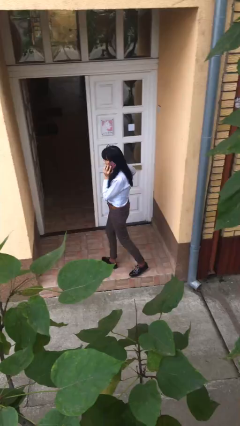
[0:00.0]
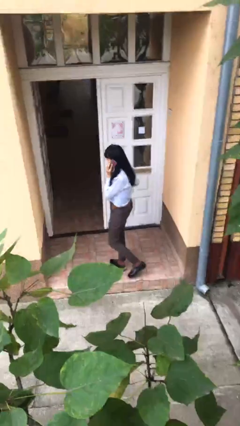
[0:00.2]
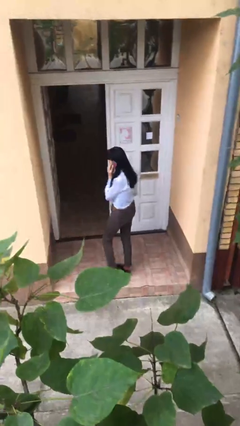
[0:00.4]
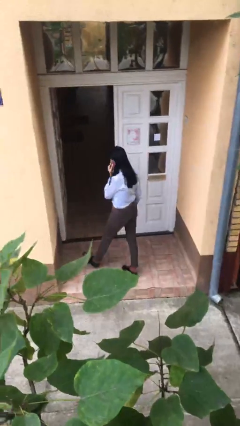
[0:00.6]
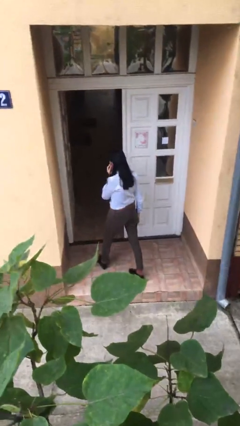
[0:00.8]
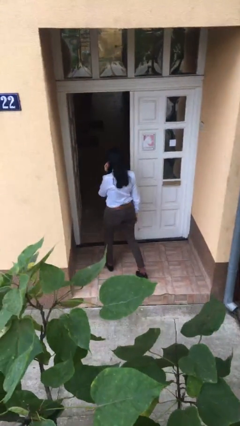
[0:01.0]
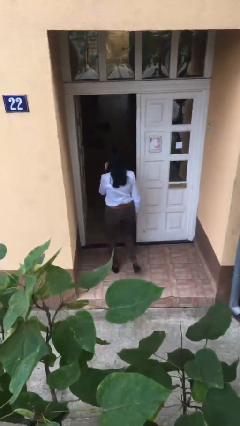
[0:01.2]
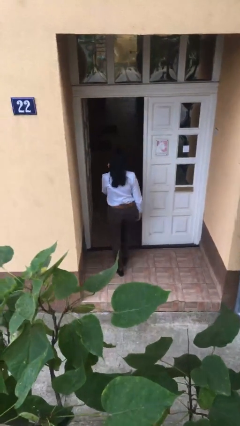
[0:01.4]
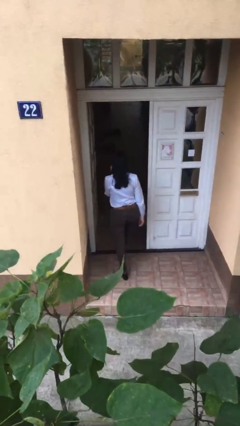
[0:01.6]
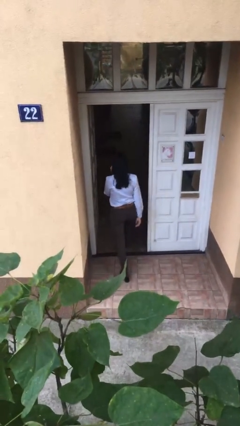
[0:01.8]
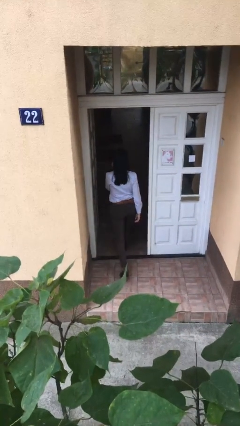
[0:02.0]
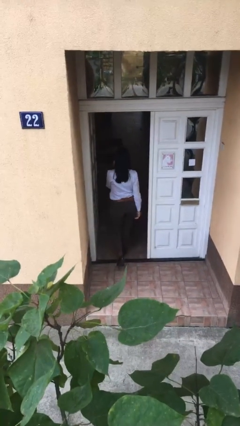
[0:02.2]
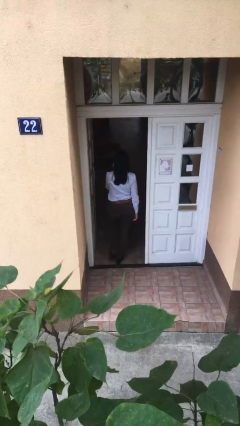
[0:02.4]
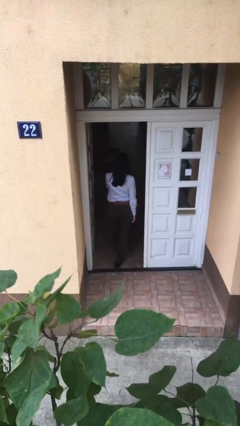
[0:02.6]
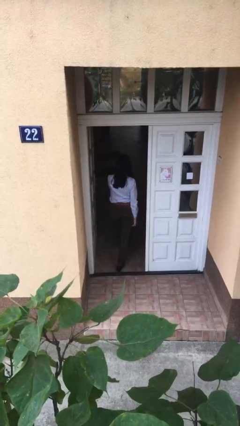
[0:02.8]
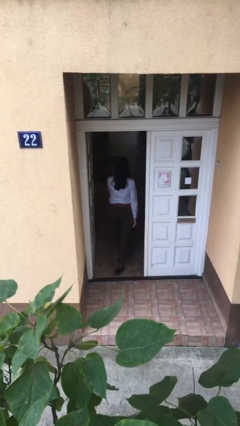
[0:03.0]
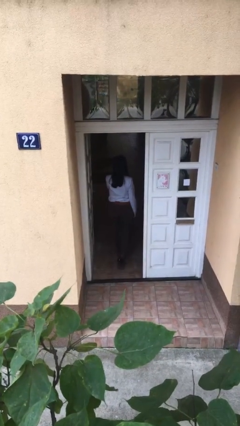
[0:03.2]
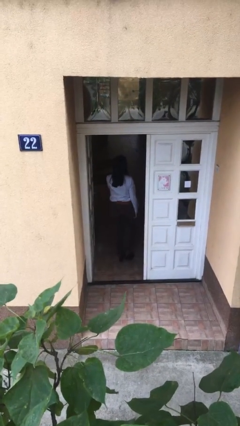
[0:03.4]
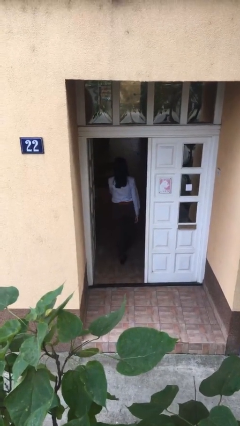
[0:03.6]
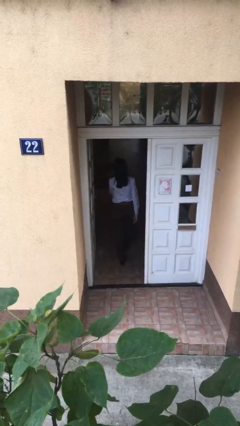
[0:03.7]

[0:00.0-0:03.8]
person exits scene through structure

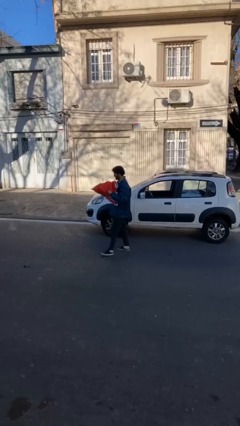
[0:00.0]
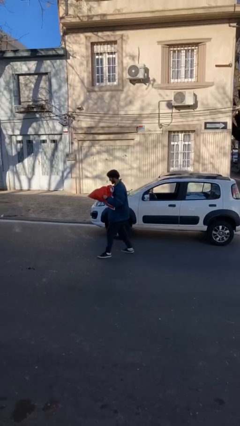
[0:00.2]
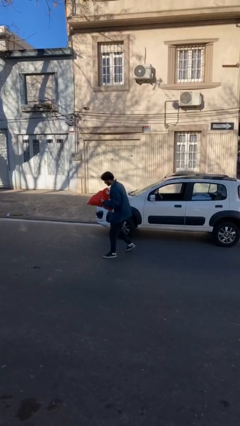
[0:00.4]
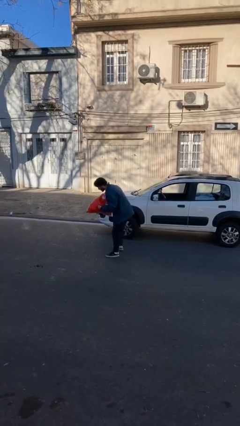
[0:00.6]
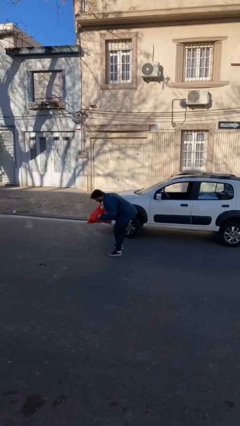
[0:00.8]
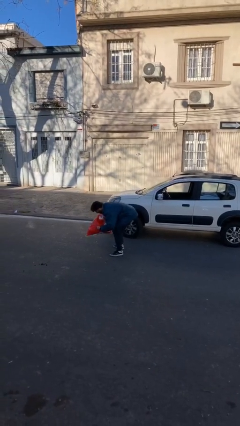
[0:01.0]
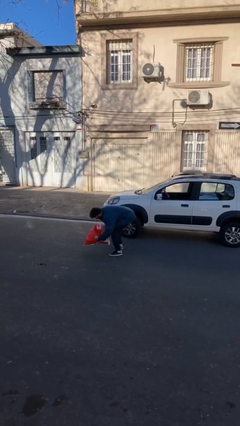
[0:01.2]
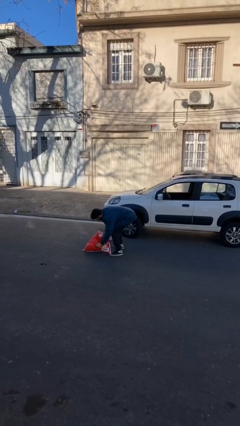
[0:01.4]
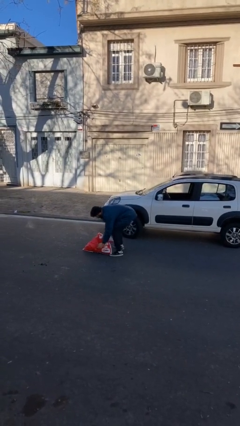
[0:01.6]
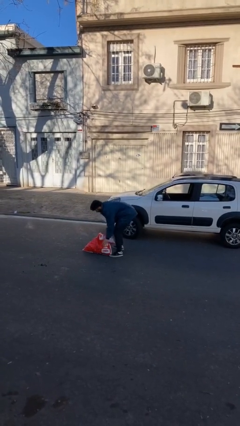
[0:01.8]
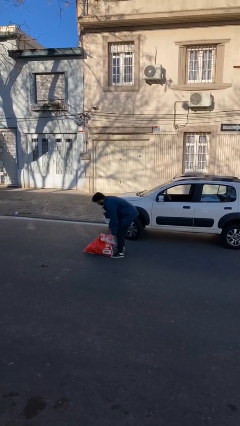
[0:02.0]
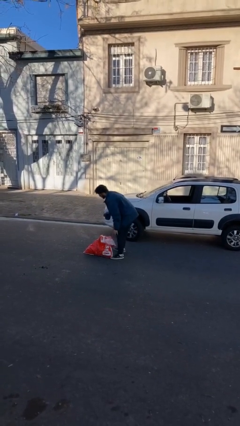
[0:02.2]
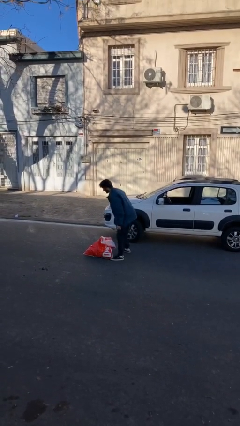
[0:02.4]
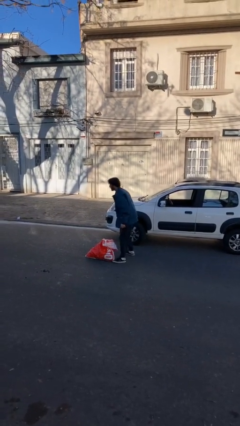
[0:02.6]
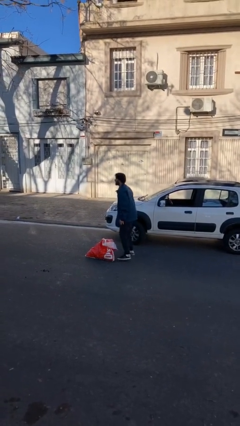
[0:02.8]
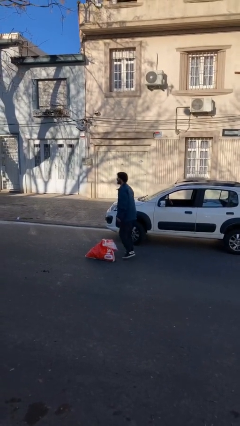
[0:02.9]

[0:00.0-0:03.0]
person puts down object on floor

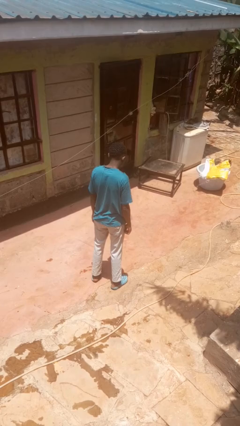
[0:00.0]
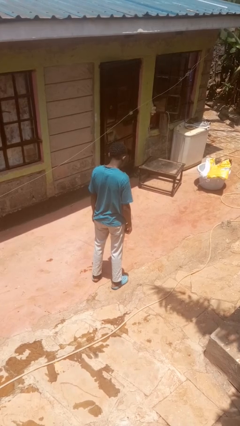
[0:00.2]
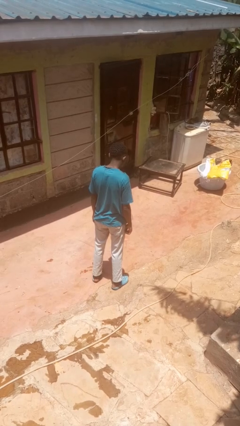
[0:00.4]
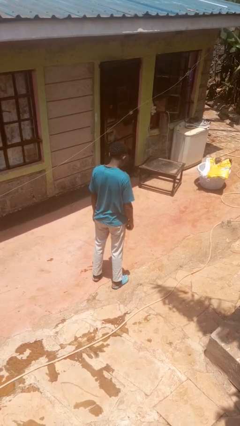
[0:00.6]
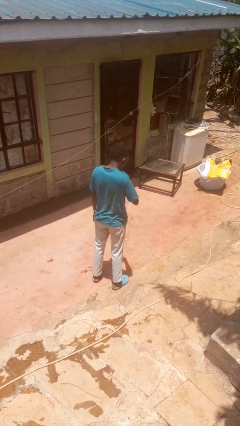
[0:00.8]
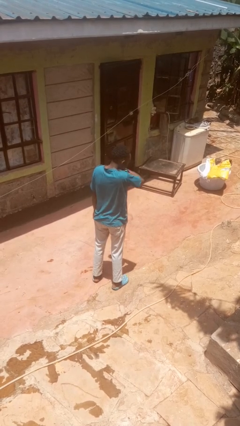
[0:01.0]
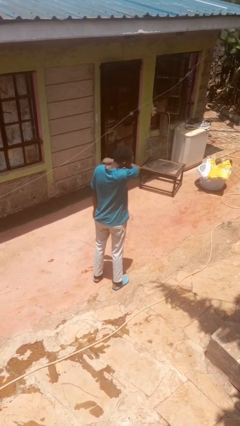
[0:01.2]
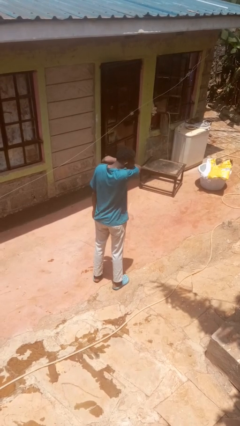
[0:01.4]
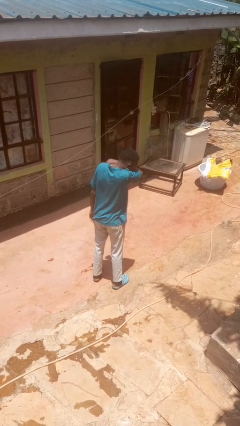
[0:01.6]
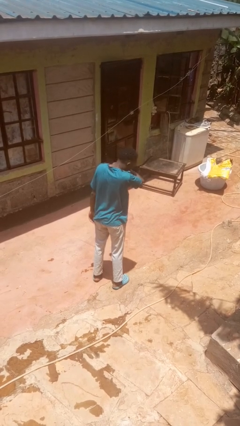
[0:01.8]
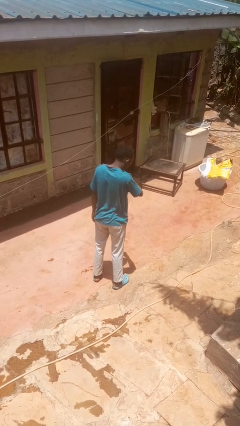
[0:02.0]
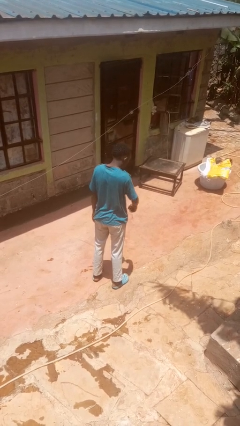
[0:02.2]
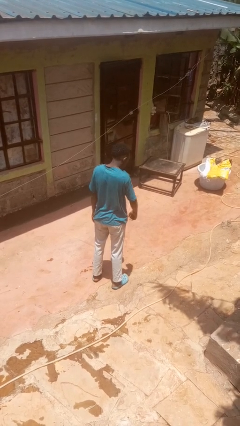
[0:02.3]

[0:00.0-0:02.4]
person sneezes into arm

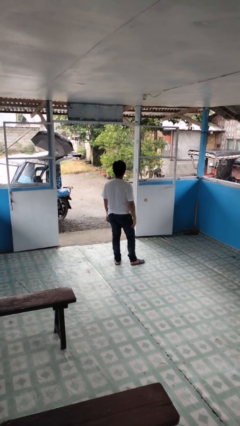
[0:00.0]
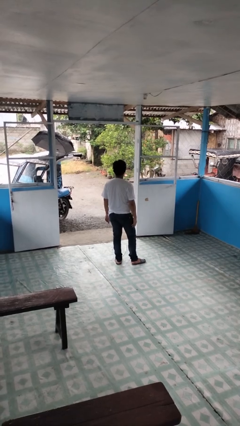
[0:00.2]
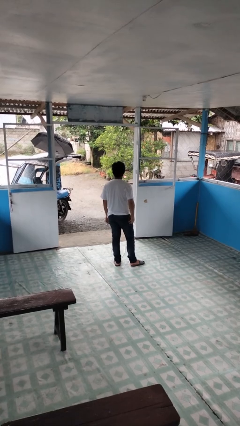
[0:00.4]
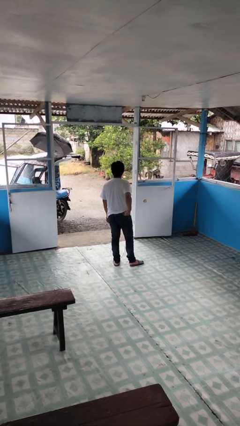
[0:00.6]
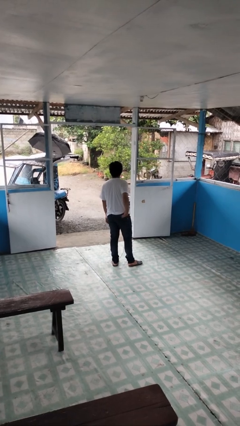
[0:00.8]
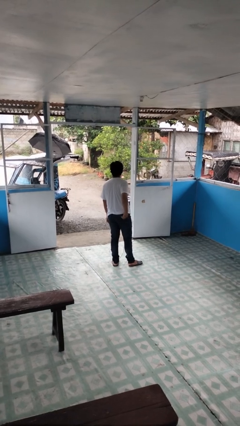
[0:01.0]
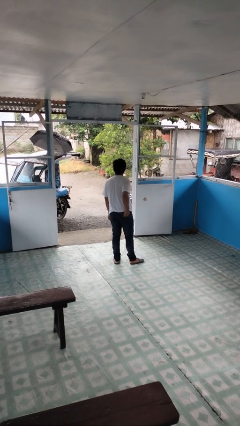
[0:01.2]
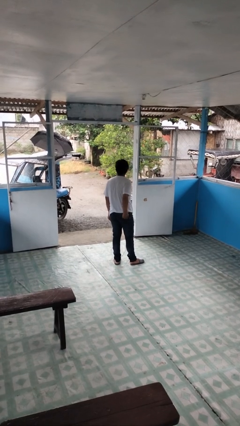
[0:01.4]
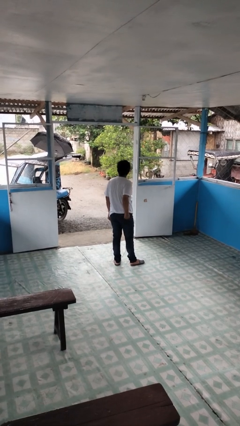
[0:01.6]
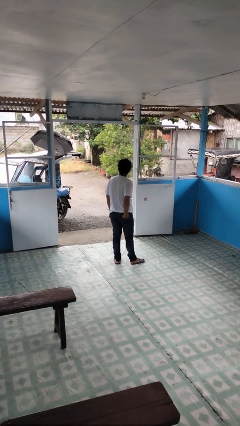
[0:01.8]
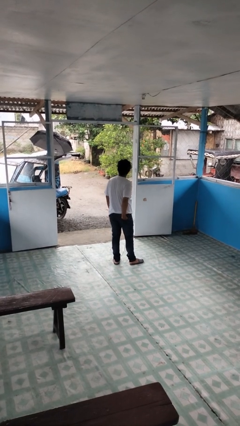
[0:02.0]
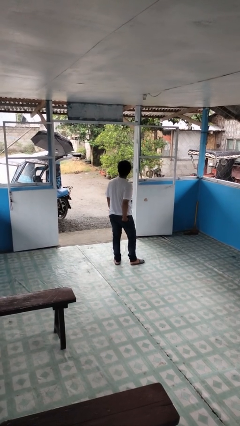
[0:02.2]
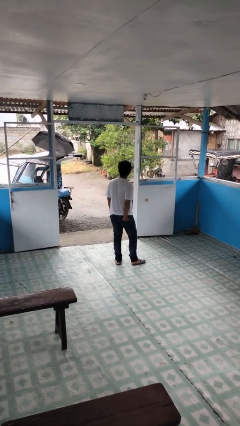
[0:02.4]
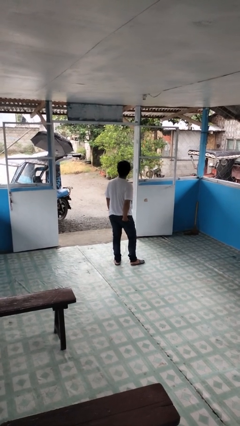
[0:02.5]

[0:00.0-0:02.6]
person puts hands in back pockets

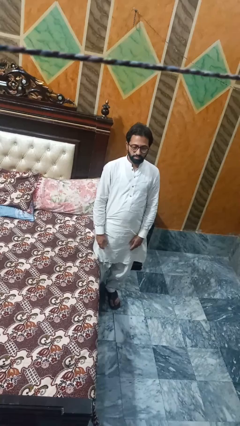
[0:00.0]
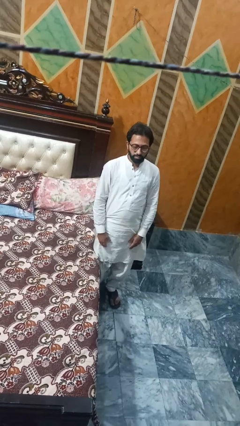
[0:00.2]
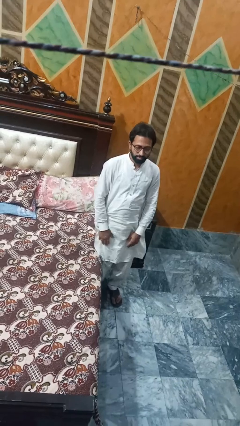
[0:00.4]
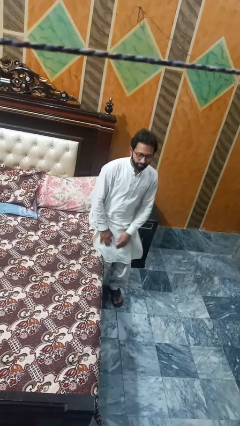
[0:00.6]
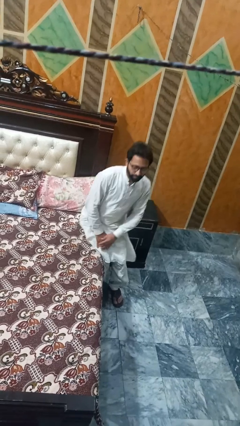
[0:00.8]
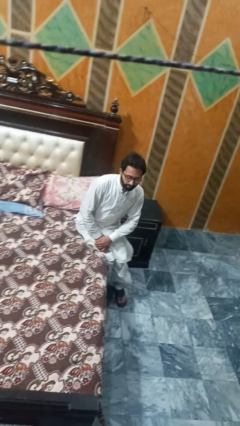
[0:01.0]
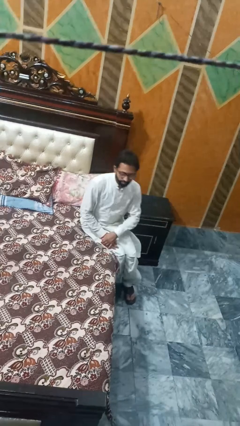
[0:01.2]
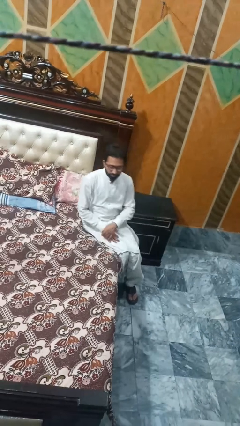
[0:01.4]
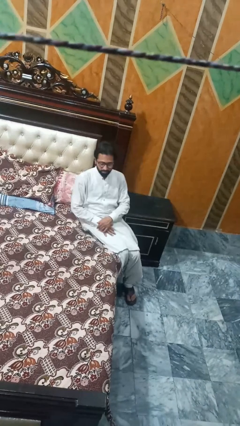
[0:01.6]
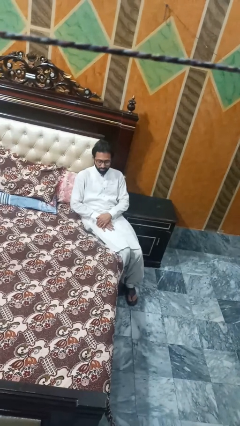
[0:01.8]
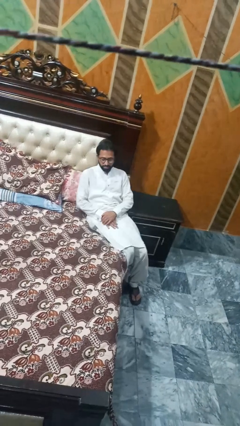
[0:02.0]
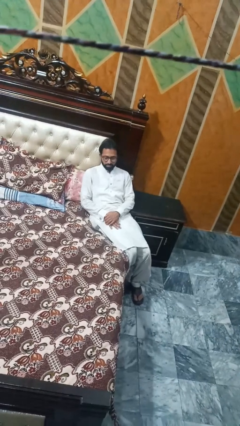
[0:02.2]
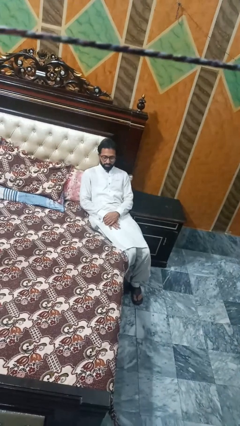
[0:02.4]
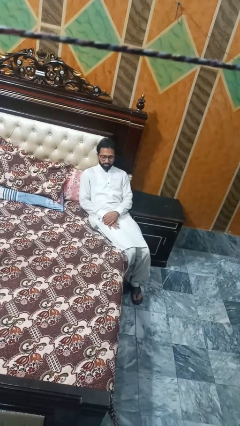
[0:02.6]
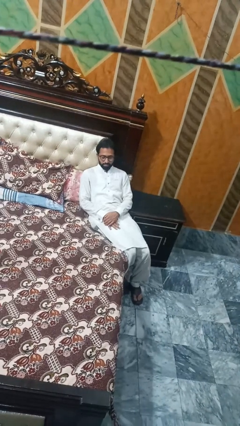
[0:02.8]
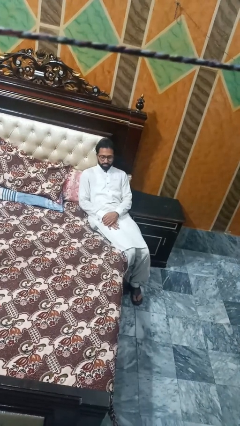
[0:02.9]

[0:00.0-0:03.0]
person lies down on bed

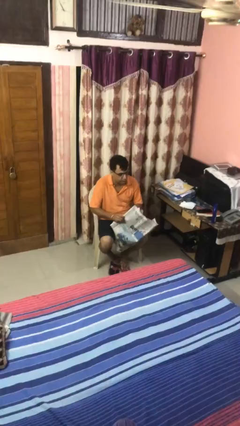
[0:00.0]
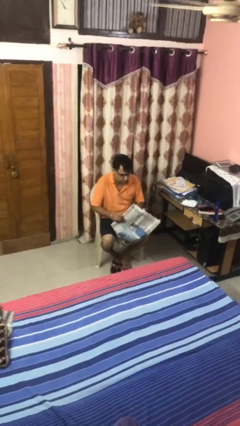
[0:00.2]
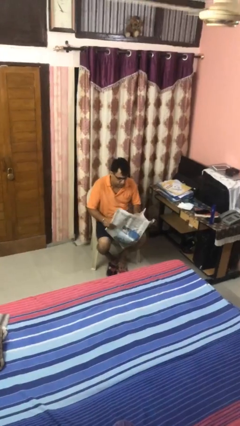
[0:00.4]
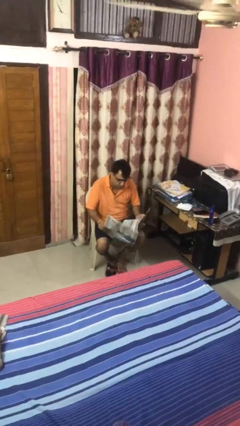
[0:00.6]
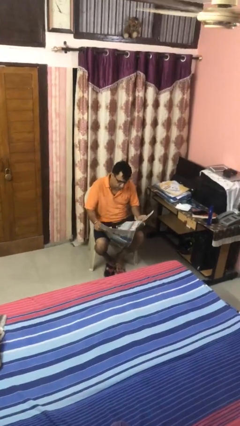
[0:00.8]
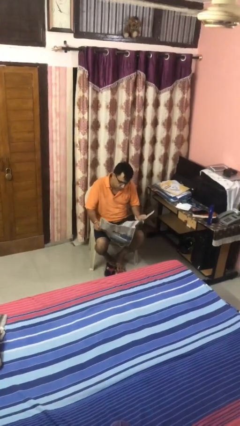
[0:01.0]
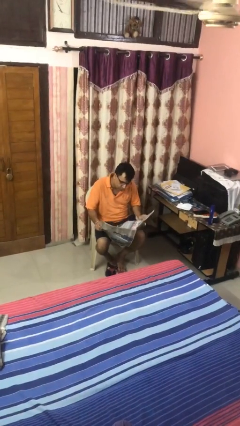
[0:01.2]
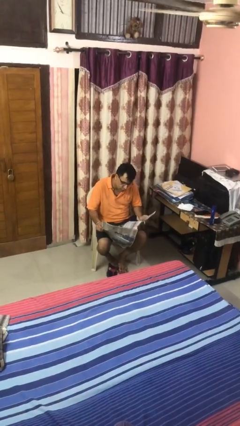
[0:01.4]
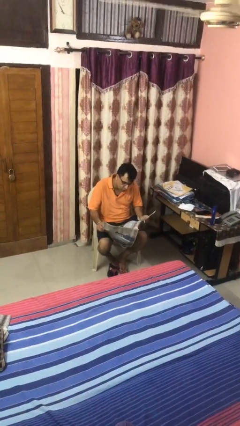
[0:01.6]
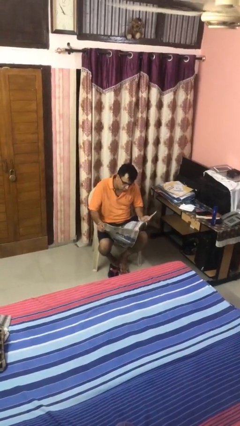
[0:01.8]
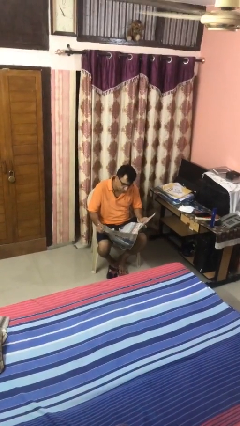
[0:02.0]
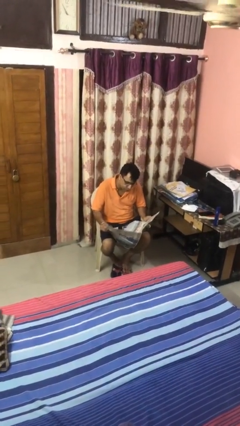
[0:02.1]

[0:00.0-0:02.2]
person reads newspaper

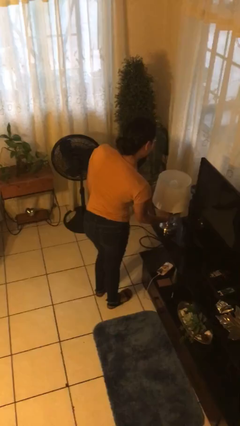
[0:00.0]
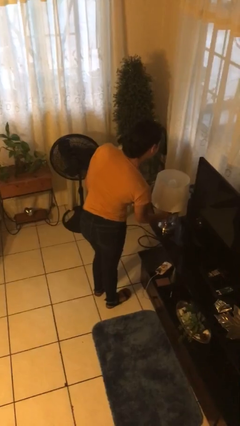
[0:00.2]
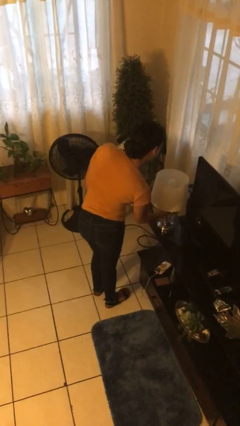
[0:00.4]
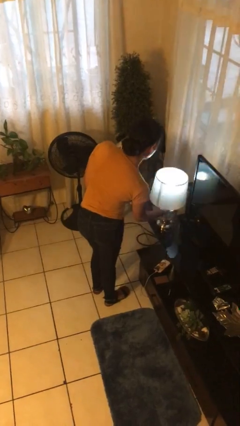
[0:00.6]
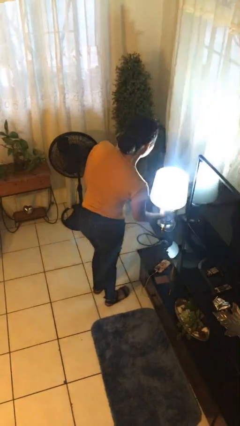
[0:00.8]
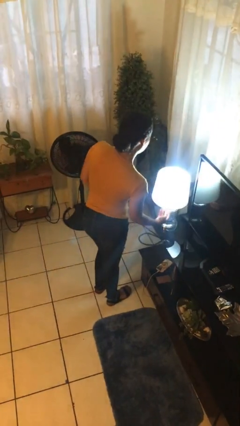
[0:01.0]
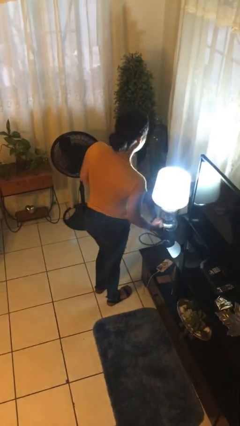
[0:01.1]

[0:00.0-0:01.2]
person turns on lamp
